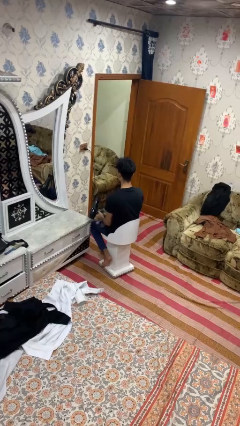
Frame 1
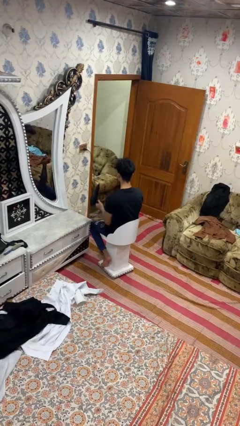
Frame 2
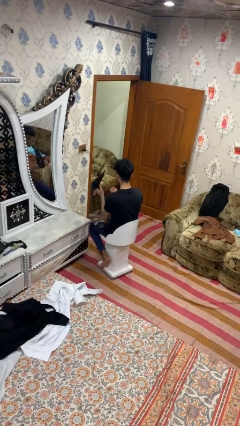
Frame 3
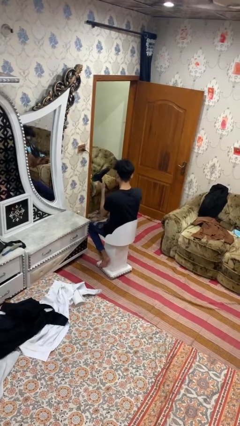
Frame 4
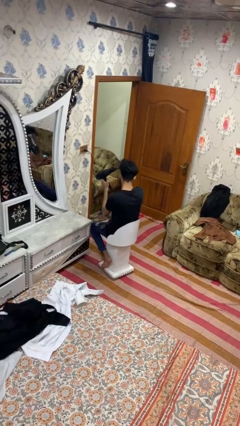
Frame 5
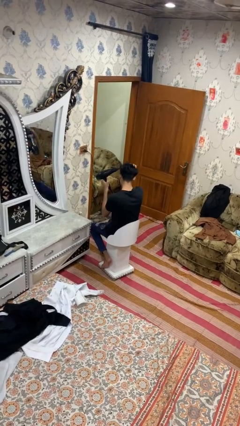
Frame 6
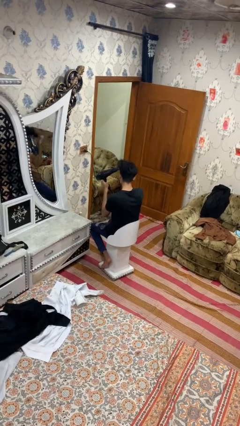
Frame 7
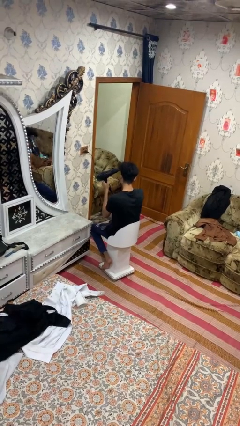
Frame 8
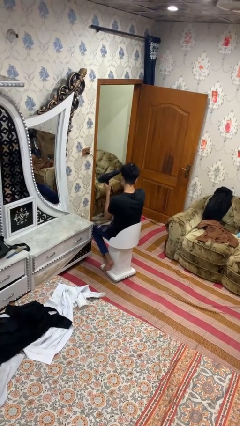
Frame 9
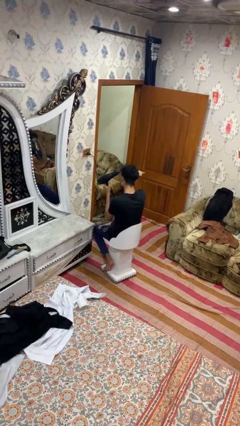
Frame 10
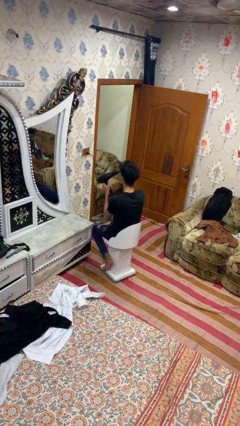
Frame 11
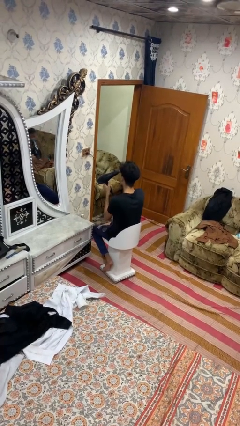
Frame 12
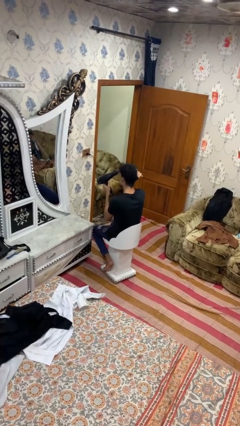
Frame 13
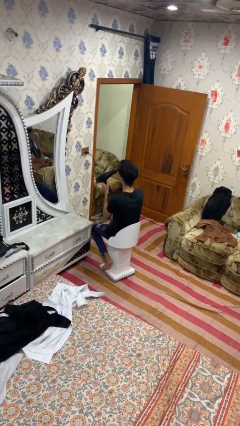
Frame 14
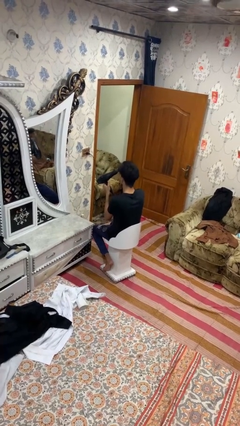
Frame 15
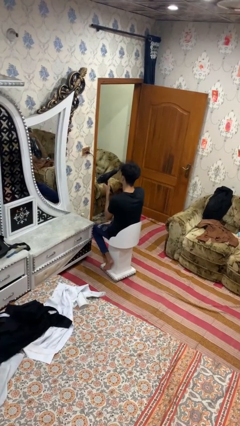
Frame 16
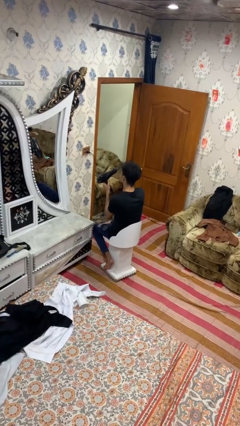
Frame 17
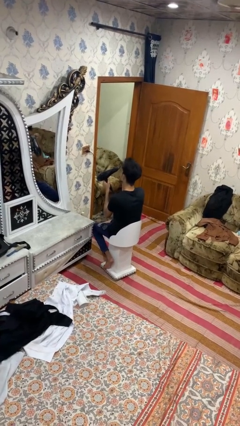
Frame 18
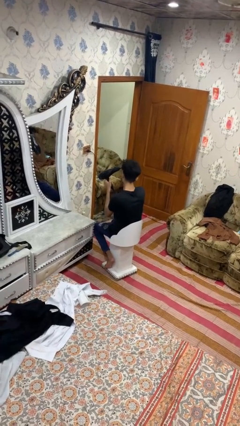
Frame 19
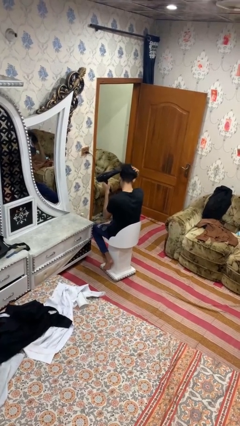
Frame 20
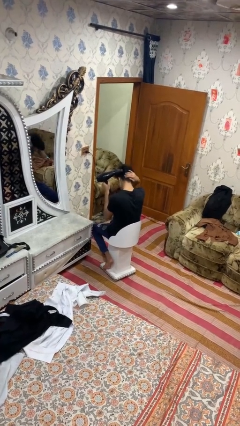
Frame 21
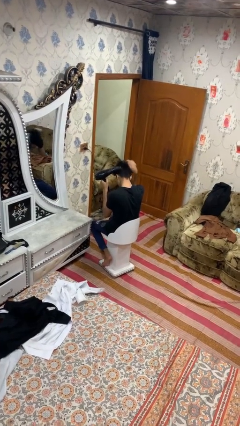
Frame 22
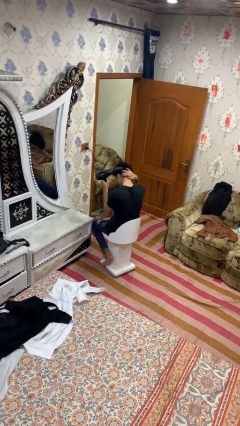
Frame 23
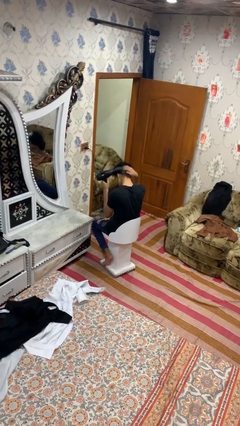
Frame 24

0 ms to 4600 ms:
person dries hair with hairdryer

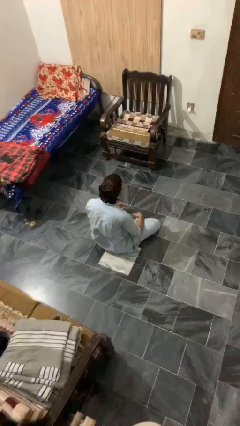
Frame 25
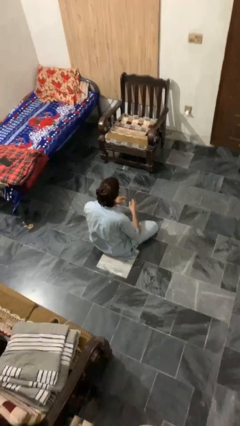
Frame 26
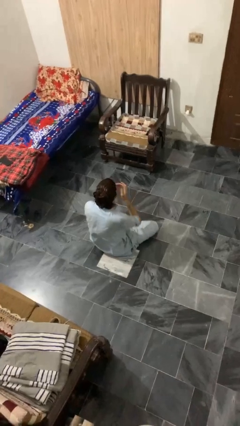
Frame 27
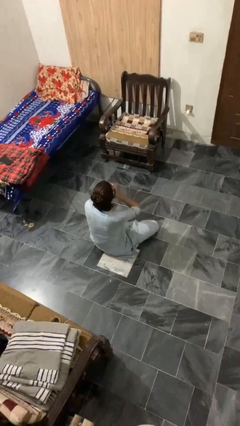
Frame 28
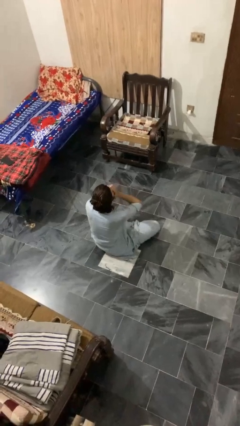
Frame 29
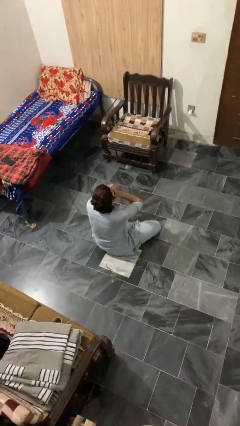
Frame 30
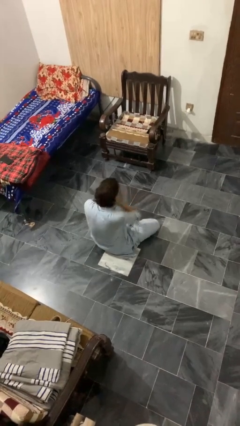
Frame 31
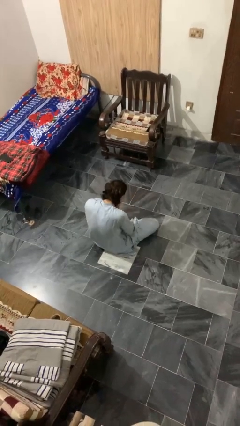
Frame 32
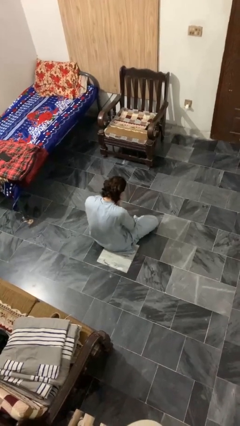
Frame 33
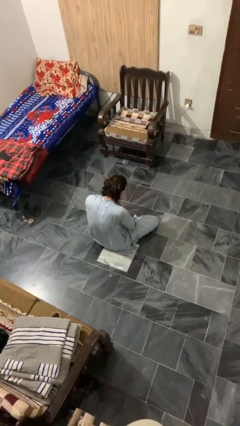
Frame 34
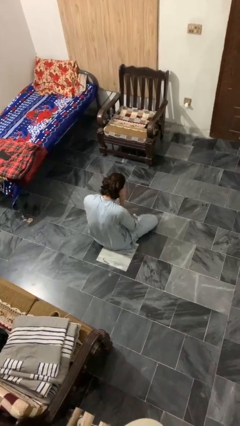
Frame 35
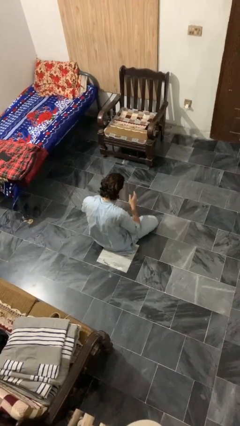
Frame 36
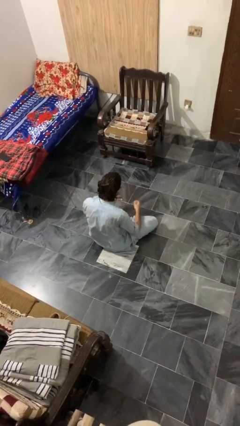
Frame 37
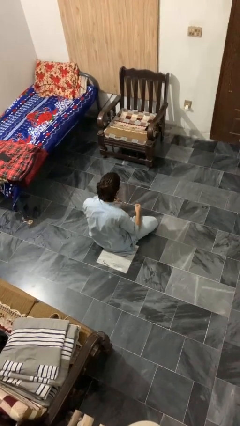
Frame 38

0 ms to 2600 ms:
person sneezes into hand

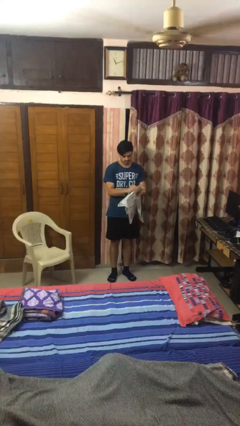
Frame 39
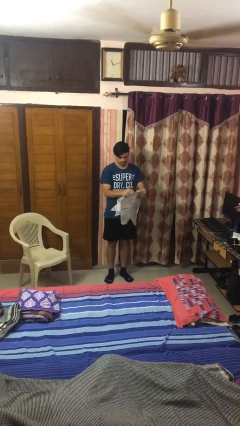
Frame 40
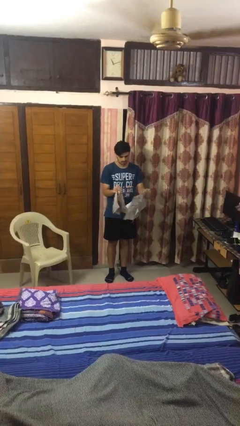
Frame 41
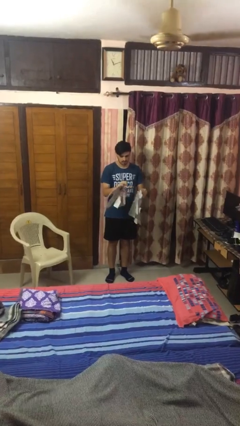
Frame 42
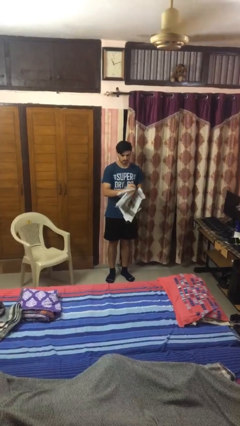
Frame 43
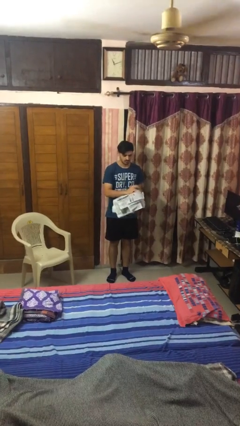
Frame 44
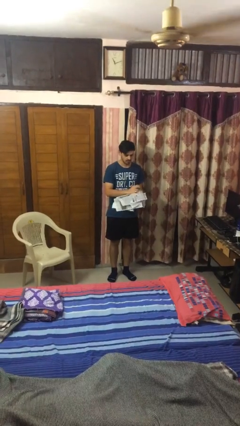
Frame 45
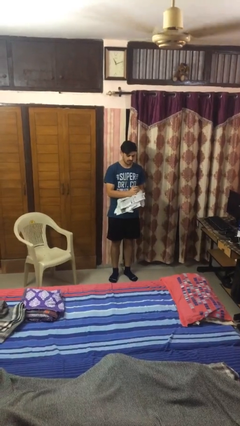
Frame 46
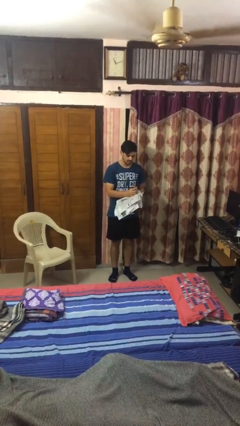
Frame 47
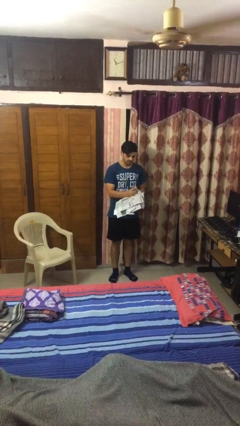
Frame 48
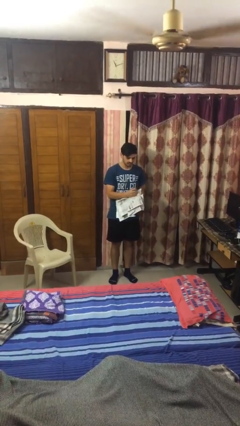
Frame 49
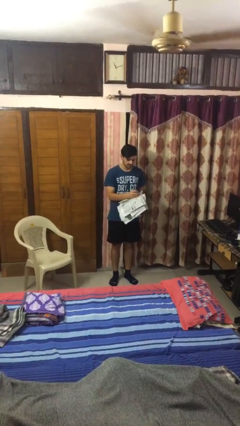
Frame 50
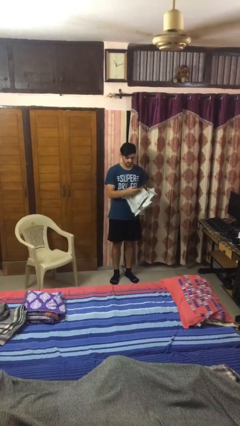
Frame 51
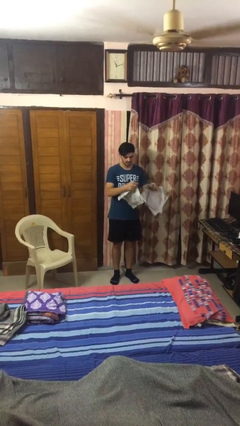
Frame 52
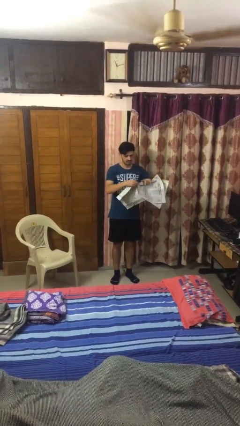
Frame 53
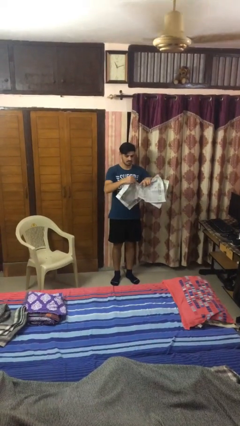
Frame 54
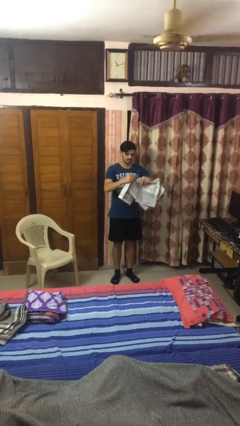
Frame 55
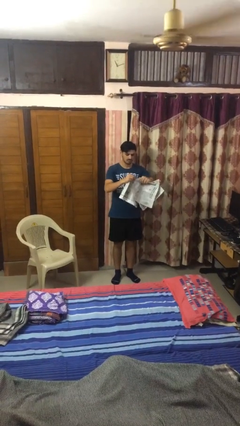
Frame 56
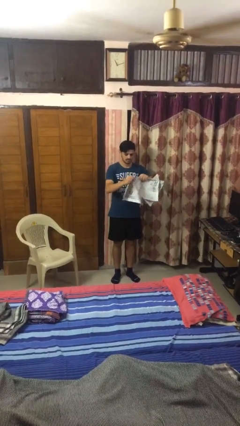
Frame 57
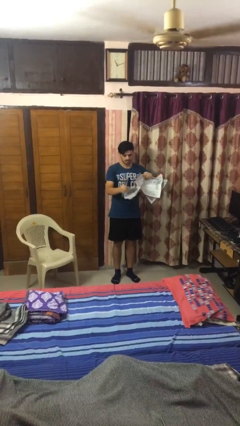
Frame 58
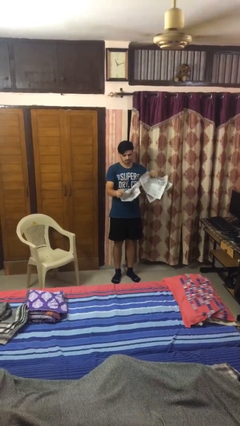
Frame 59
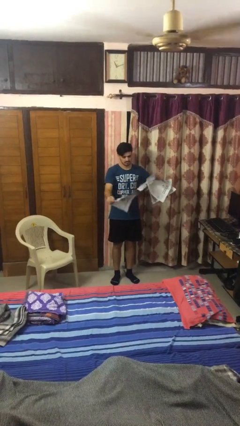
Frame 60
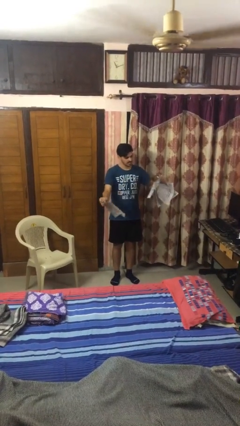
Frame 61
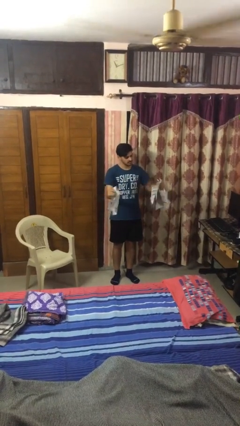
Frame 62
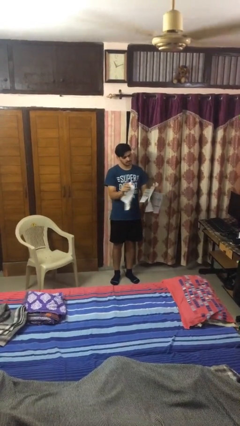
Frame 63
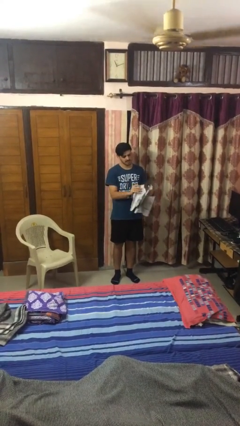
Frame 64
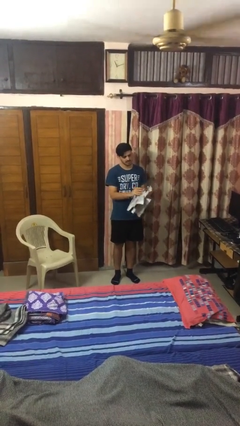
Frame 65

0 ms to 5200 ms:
person tears paper

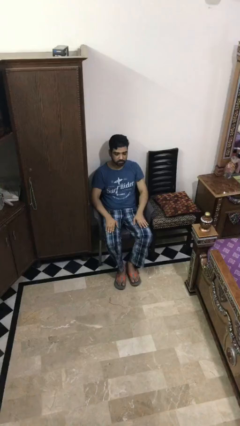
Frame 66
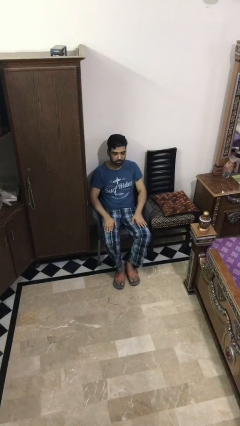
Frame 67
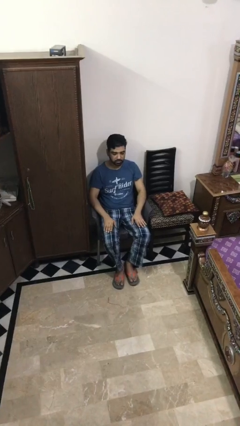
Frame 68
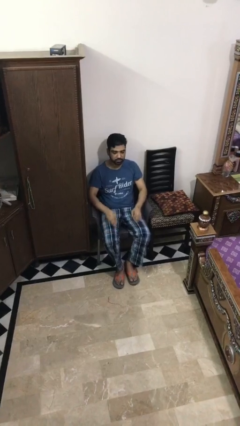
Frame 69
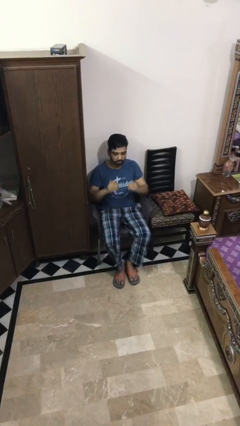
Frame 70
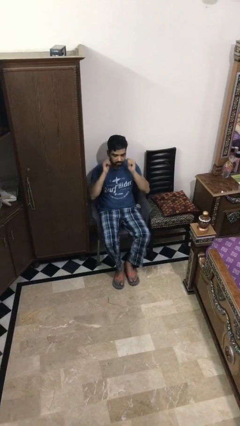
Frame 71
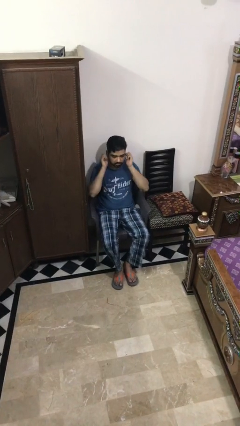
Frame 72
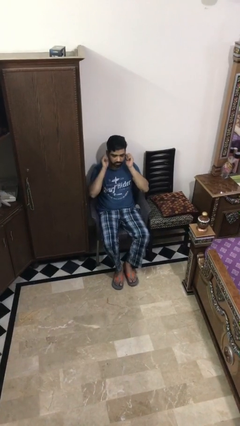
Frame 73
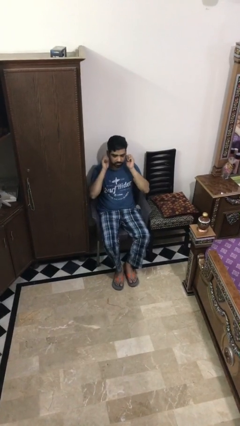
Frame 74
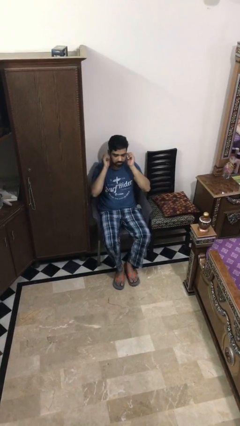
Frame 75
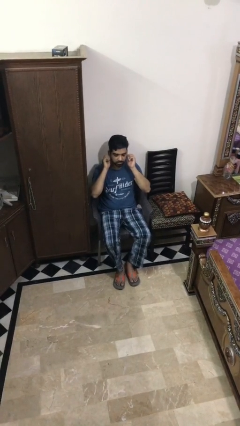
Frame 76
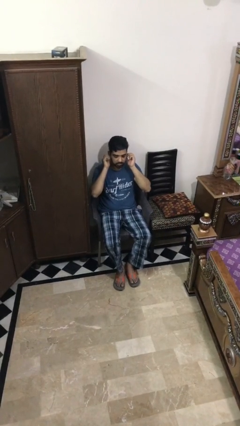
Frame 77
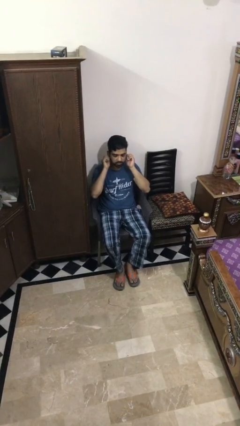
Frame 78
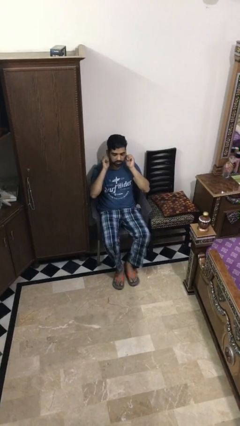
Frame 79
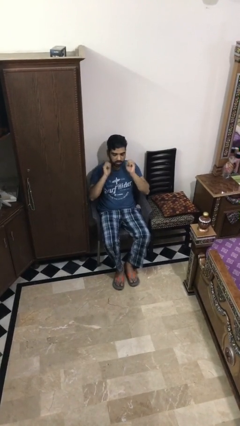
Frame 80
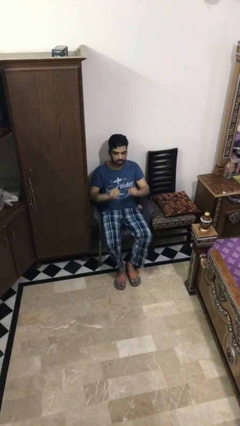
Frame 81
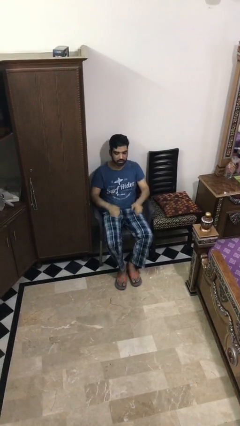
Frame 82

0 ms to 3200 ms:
person touches earlobe

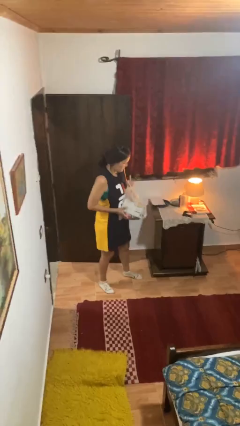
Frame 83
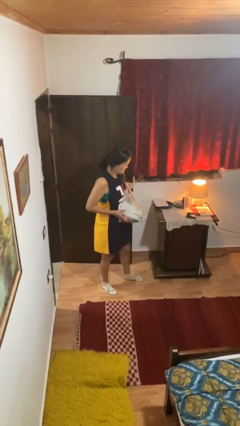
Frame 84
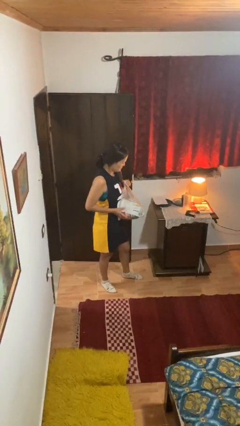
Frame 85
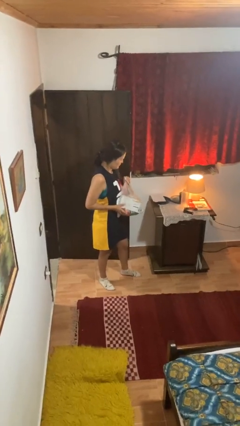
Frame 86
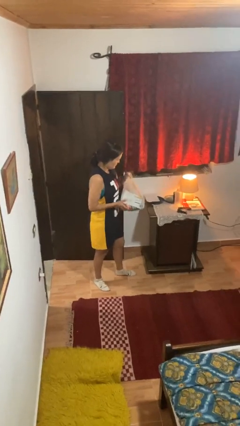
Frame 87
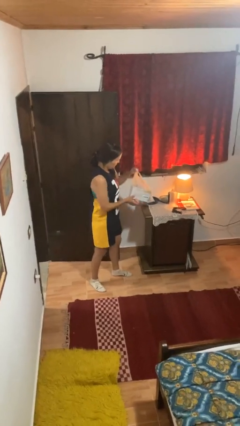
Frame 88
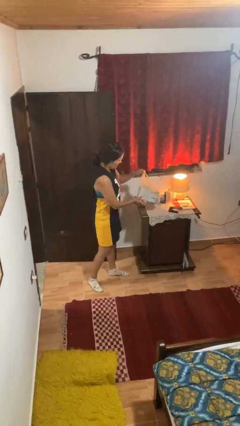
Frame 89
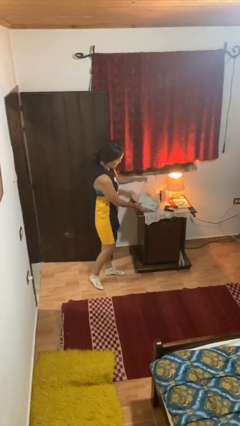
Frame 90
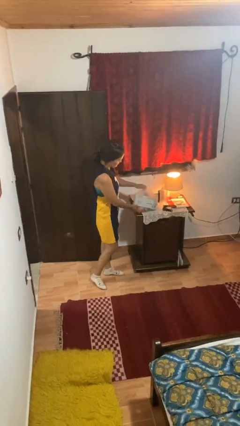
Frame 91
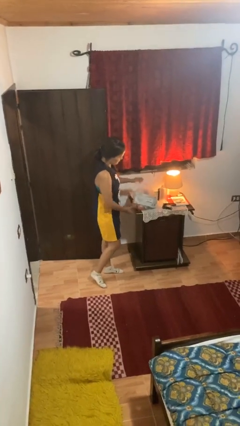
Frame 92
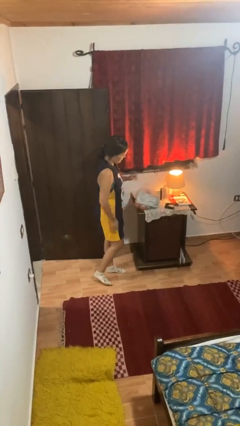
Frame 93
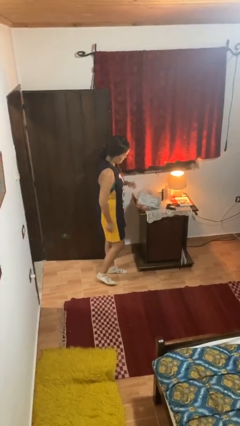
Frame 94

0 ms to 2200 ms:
person puts down object on countertop
